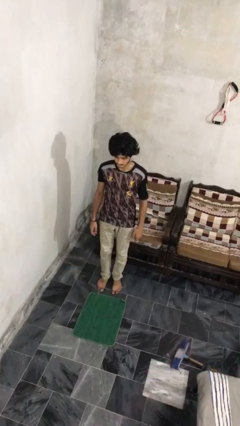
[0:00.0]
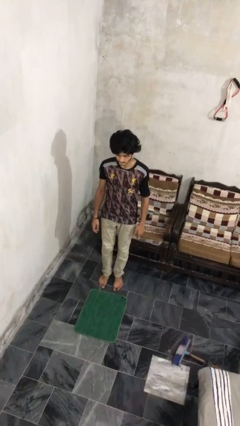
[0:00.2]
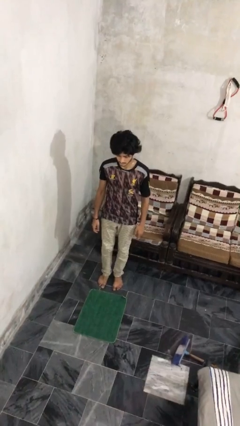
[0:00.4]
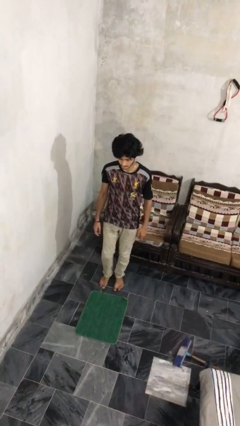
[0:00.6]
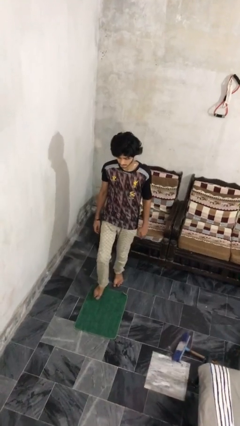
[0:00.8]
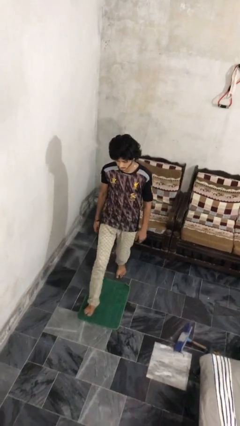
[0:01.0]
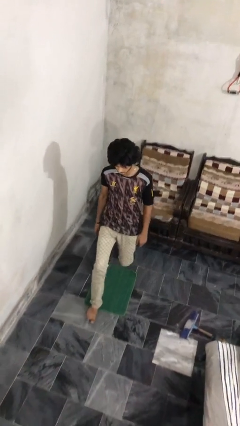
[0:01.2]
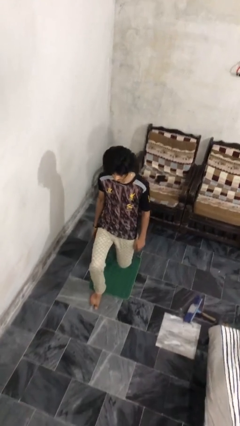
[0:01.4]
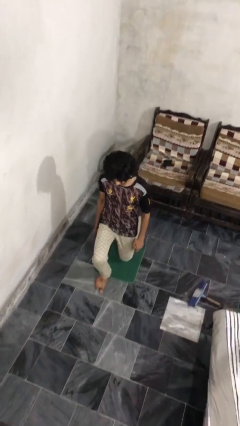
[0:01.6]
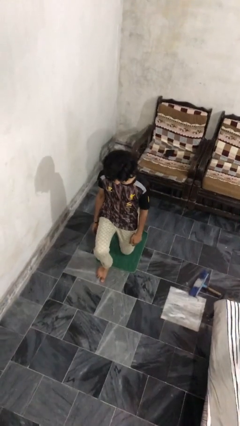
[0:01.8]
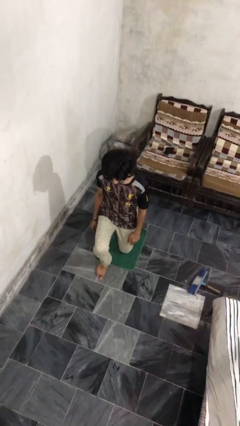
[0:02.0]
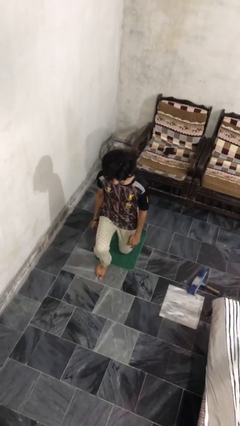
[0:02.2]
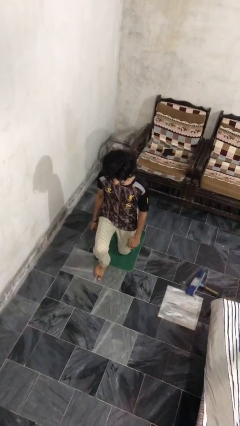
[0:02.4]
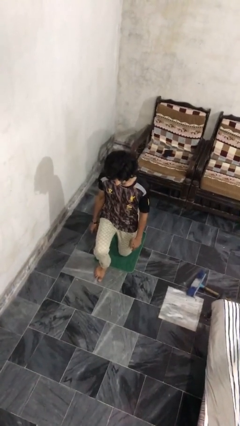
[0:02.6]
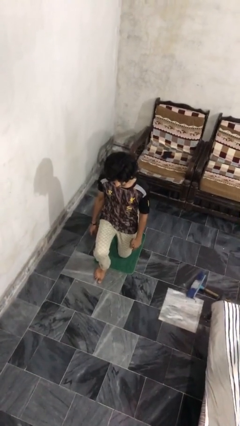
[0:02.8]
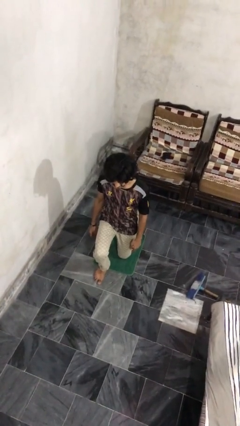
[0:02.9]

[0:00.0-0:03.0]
person kneels

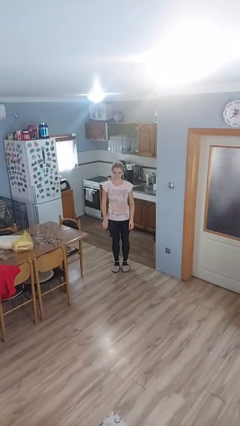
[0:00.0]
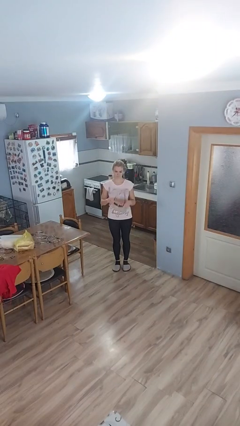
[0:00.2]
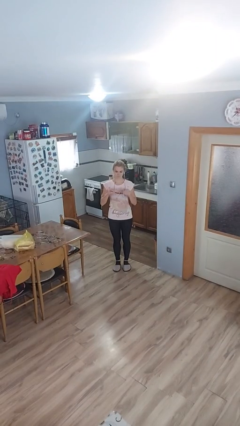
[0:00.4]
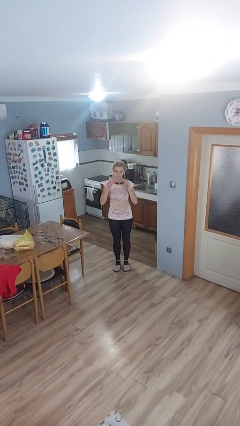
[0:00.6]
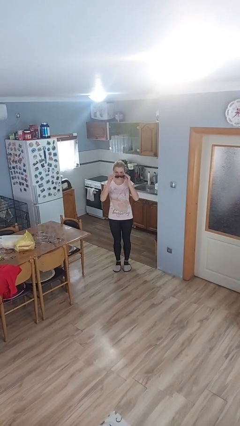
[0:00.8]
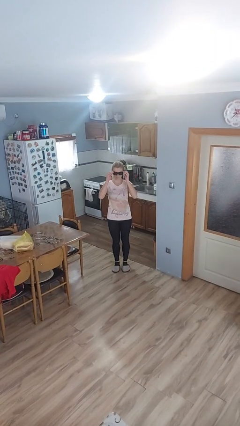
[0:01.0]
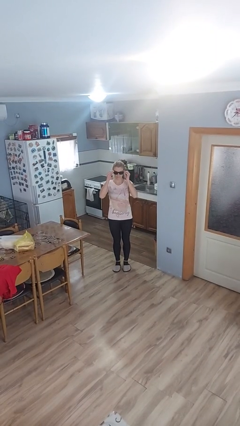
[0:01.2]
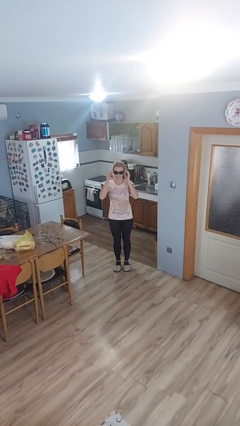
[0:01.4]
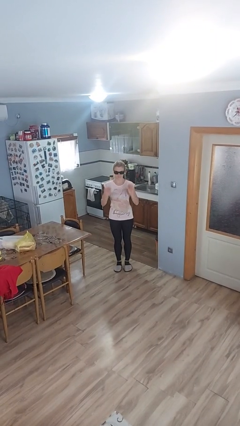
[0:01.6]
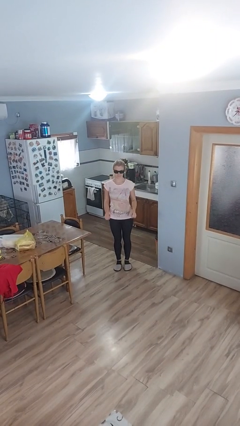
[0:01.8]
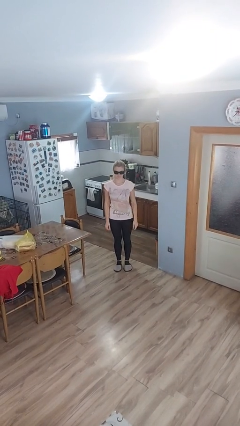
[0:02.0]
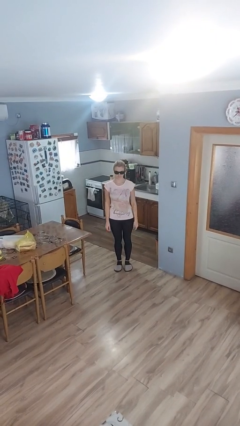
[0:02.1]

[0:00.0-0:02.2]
person puts on sunglasses

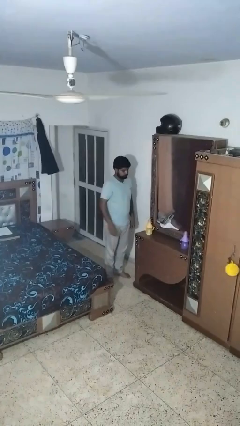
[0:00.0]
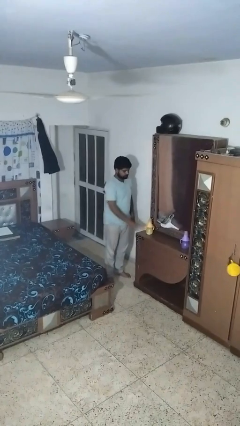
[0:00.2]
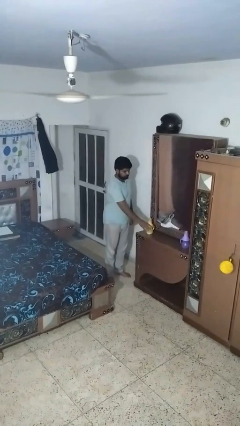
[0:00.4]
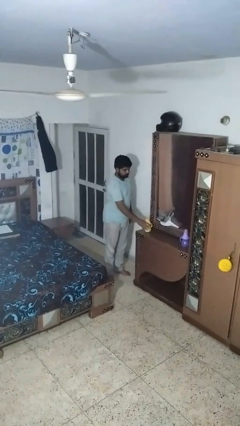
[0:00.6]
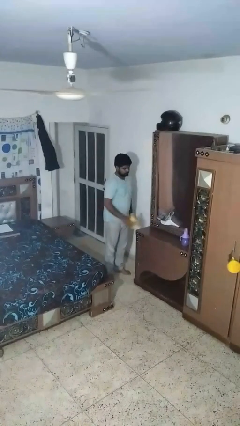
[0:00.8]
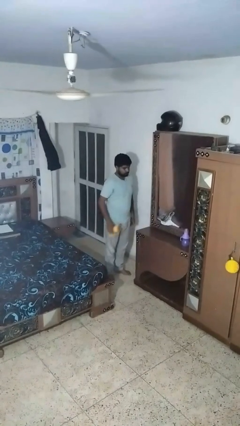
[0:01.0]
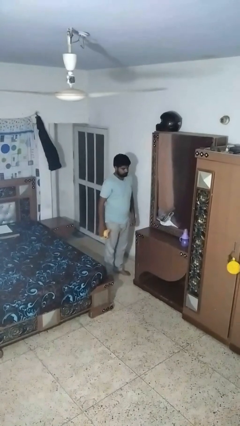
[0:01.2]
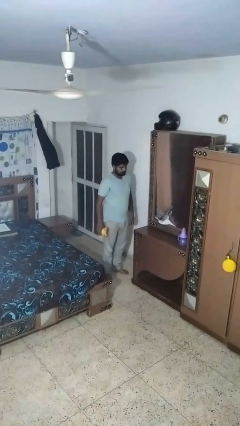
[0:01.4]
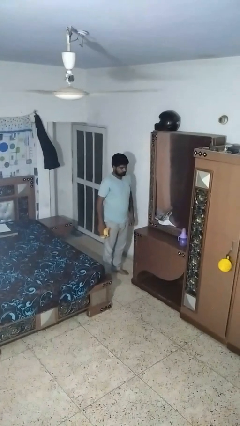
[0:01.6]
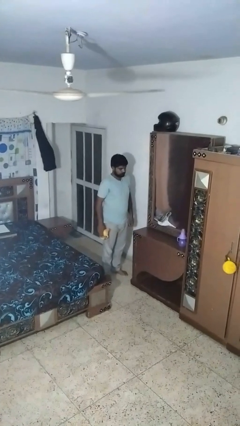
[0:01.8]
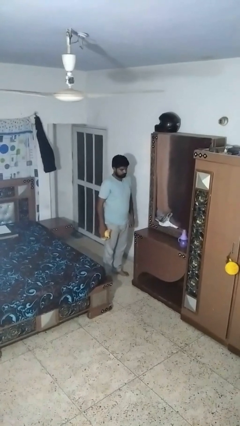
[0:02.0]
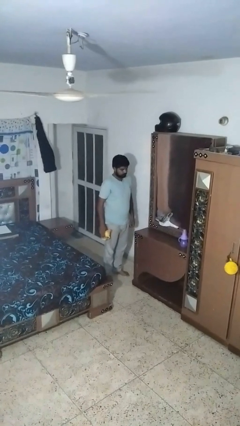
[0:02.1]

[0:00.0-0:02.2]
person picks up object from countertop

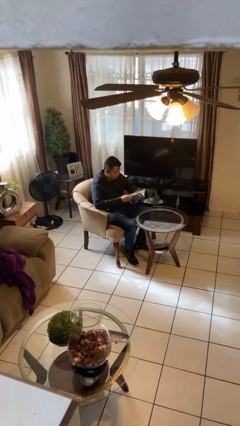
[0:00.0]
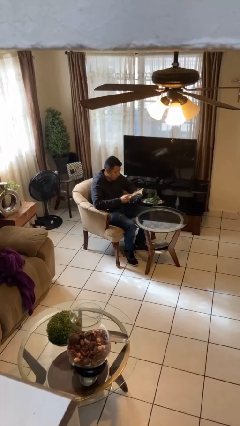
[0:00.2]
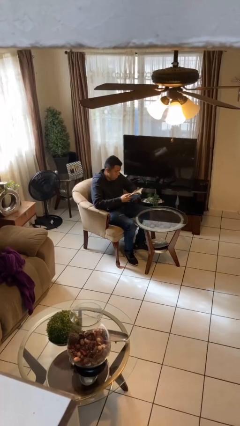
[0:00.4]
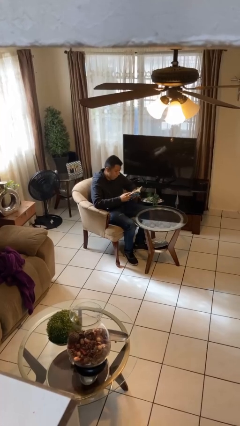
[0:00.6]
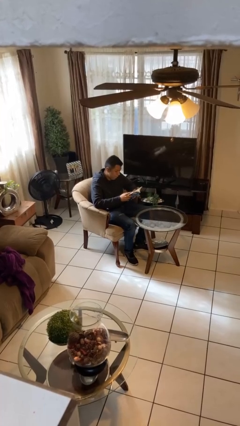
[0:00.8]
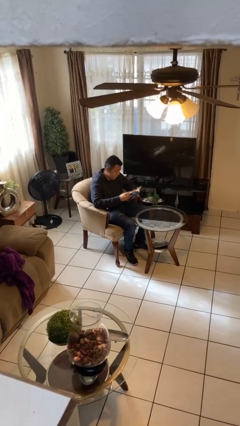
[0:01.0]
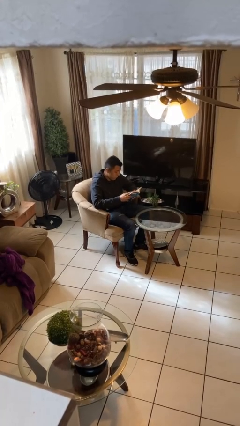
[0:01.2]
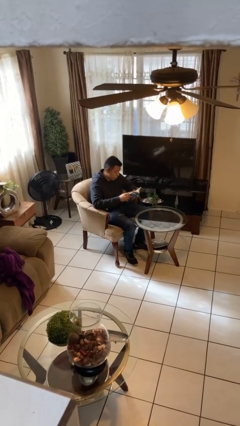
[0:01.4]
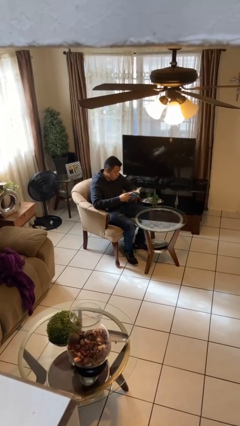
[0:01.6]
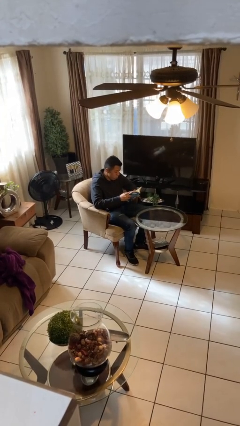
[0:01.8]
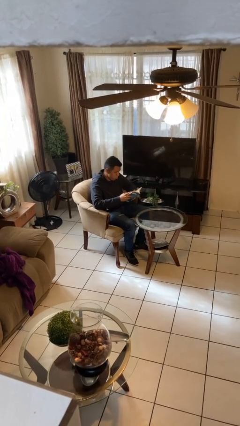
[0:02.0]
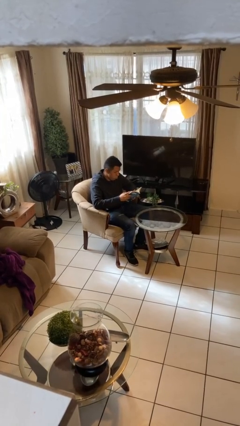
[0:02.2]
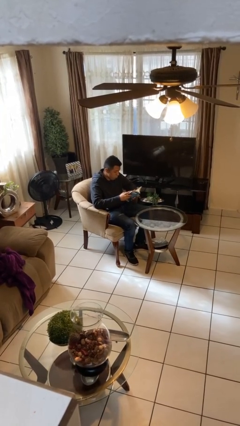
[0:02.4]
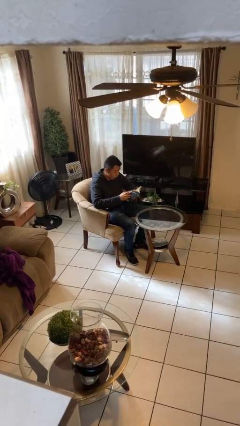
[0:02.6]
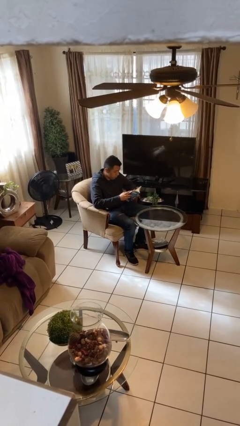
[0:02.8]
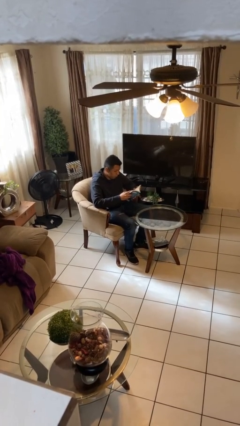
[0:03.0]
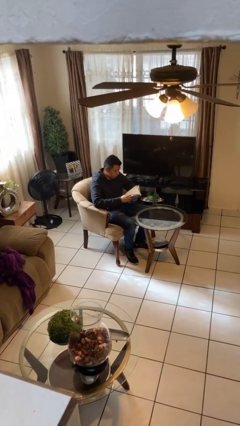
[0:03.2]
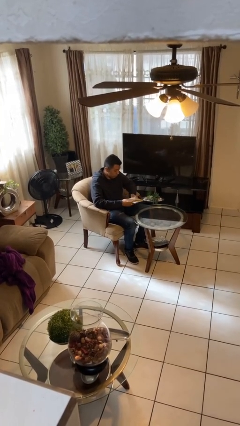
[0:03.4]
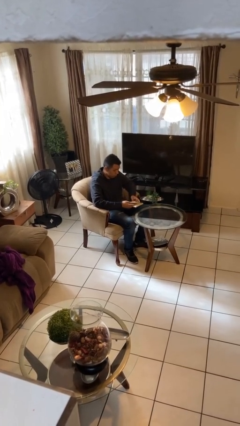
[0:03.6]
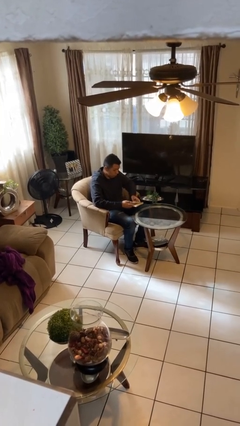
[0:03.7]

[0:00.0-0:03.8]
person reads document

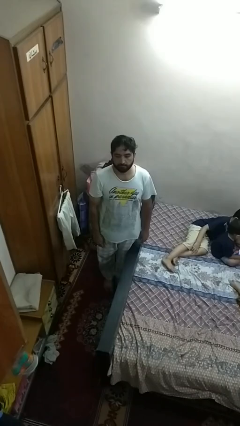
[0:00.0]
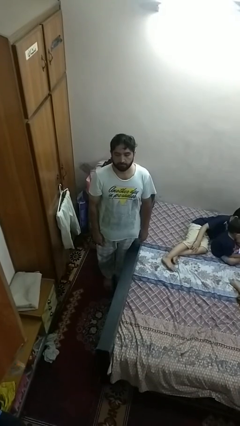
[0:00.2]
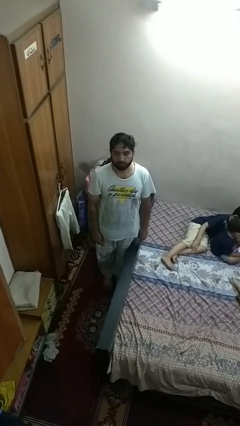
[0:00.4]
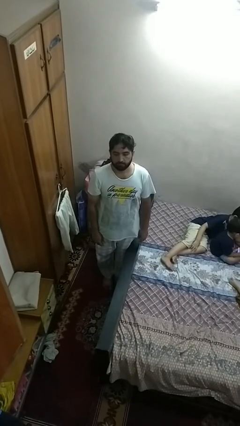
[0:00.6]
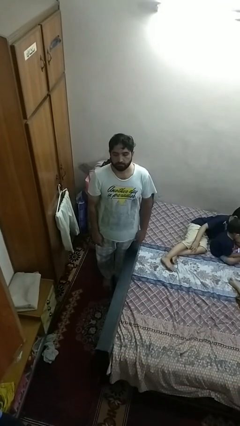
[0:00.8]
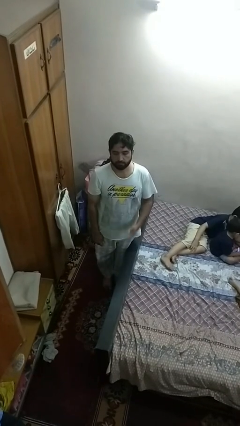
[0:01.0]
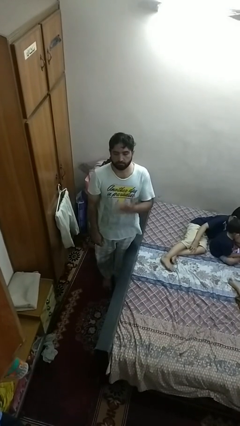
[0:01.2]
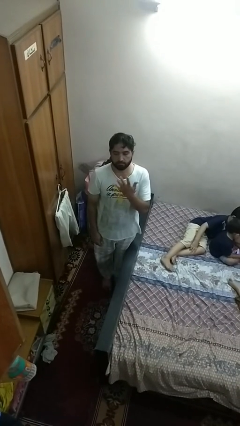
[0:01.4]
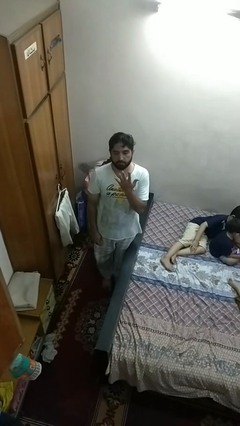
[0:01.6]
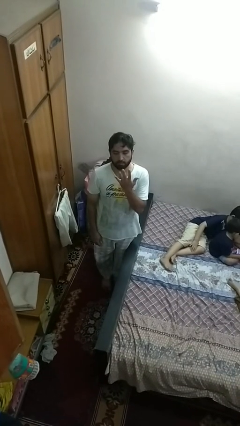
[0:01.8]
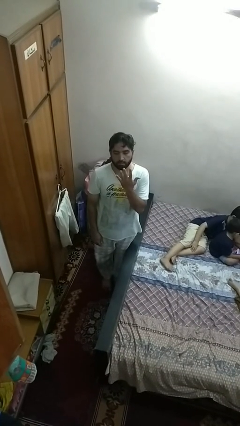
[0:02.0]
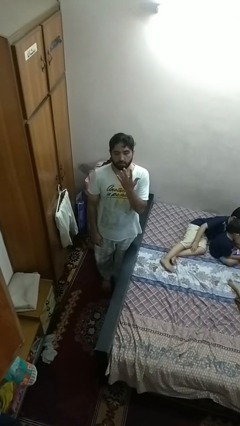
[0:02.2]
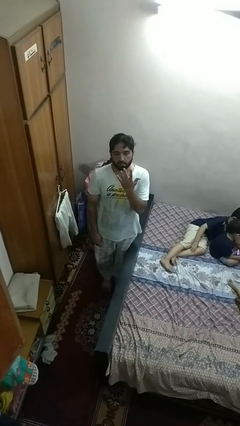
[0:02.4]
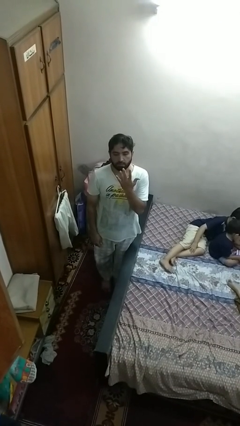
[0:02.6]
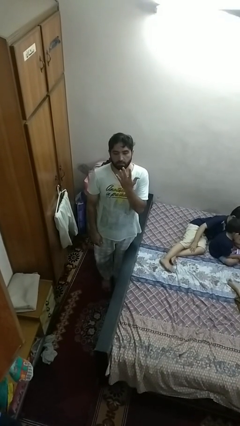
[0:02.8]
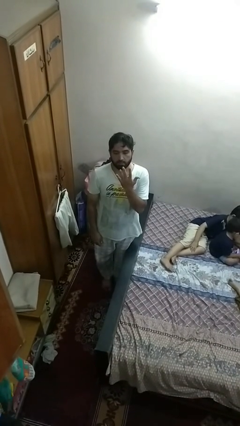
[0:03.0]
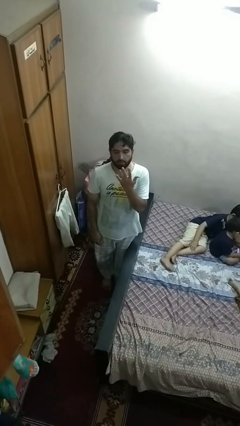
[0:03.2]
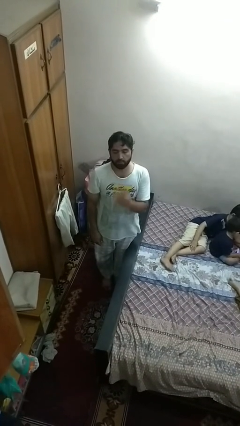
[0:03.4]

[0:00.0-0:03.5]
person gestures number five

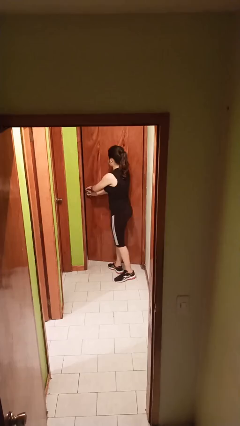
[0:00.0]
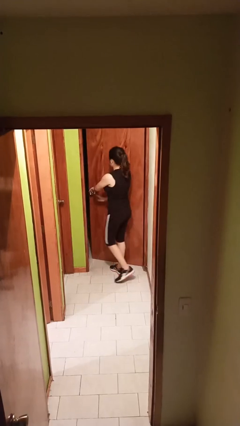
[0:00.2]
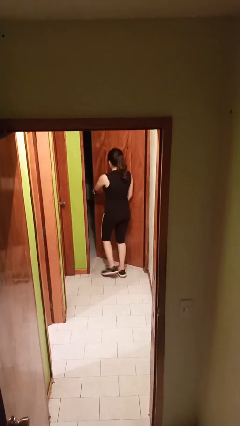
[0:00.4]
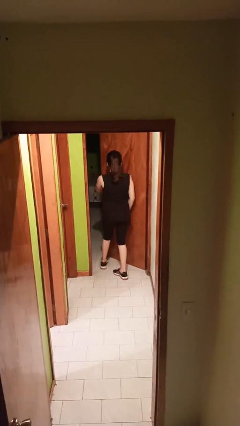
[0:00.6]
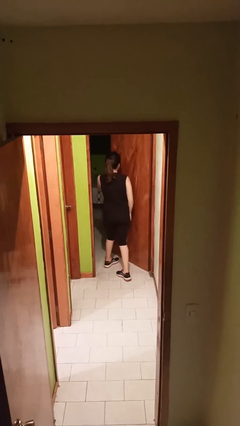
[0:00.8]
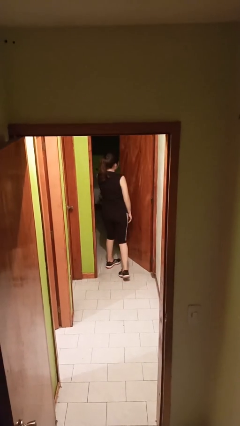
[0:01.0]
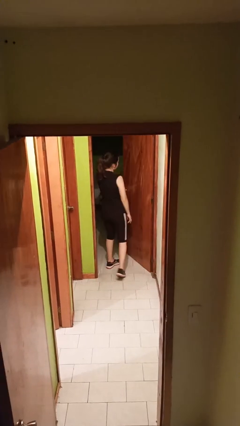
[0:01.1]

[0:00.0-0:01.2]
person opens facility door

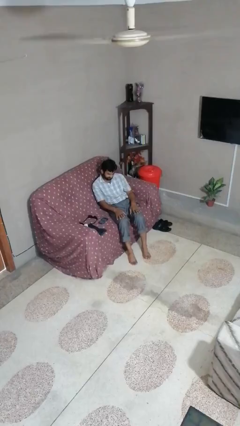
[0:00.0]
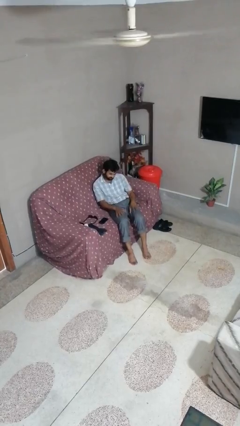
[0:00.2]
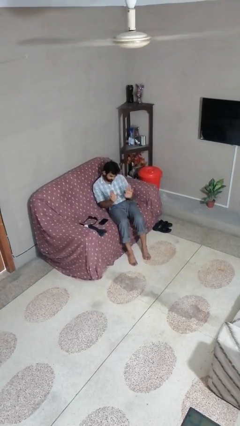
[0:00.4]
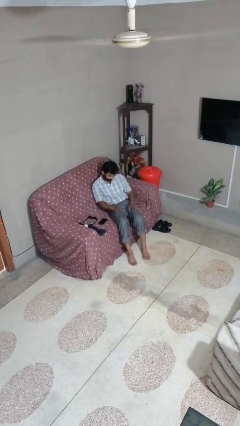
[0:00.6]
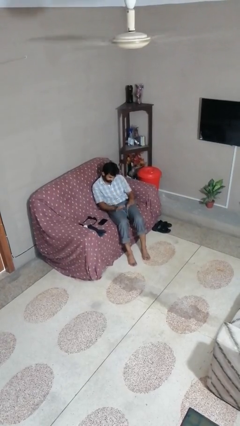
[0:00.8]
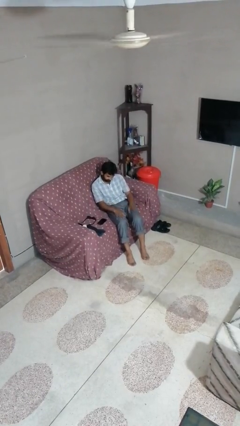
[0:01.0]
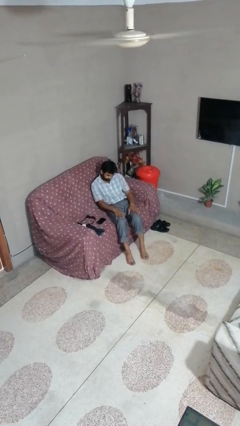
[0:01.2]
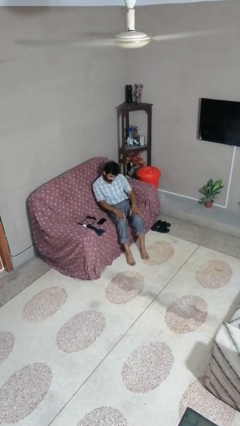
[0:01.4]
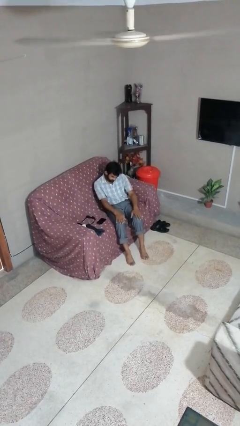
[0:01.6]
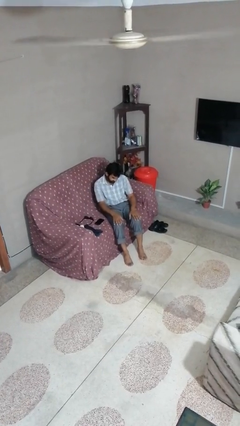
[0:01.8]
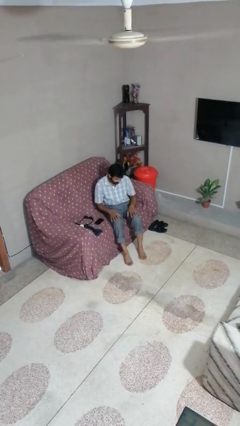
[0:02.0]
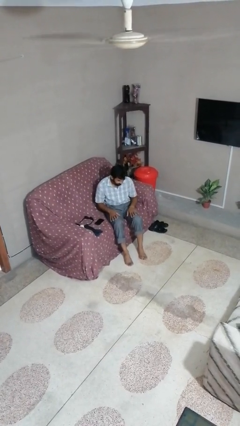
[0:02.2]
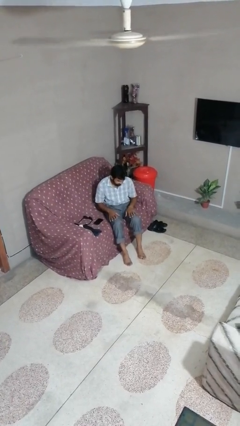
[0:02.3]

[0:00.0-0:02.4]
person slaps hands on thighs
